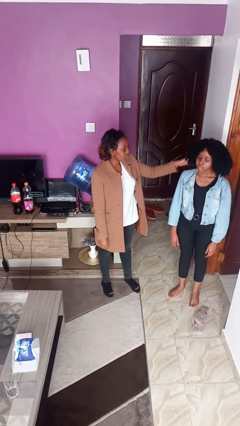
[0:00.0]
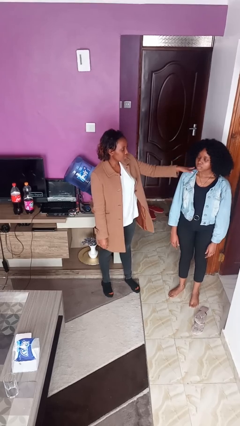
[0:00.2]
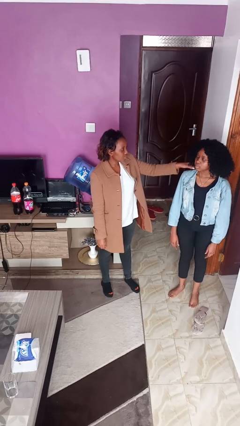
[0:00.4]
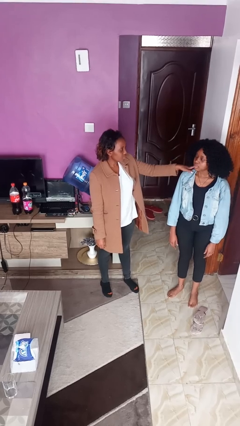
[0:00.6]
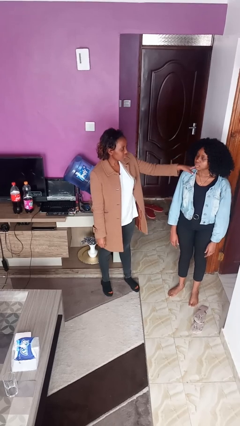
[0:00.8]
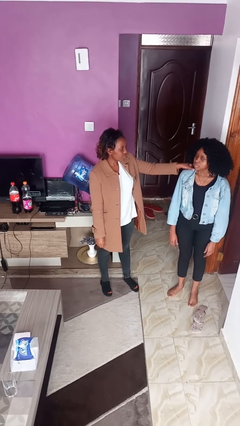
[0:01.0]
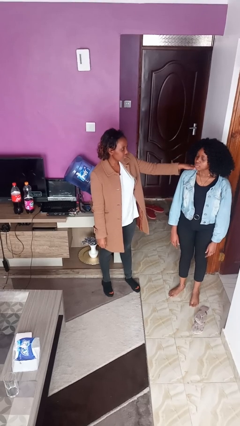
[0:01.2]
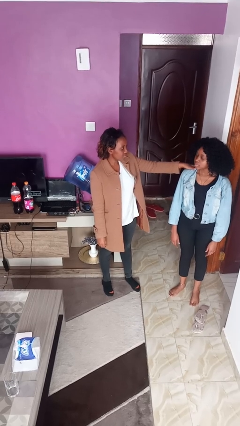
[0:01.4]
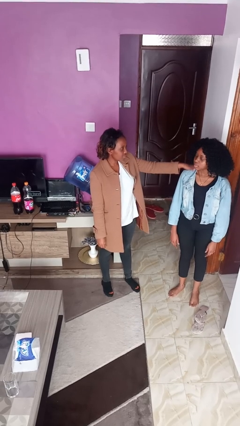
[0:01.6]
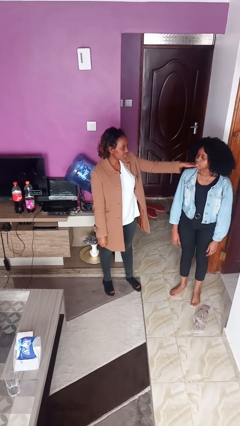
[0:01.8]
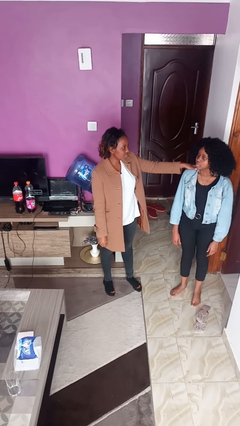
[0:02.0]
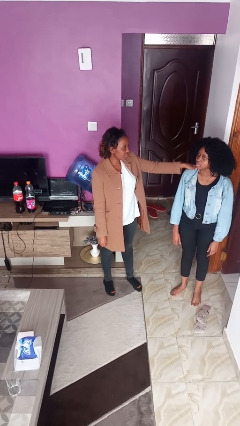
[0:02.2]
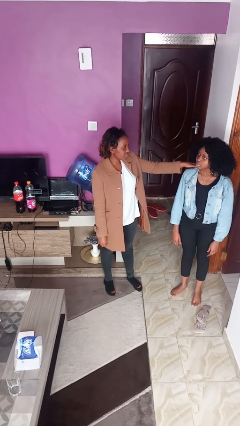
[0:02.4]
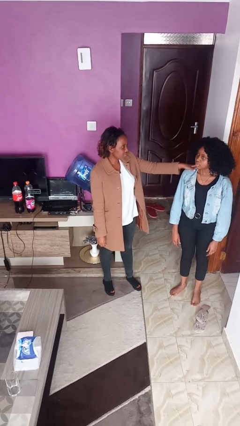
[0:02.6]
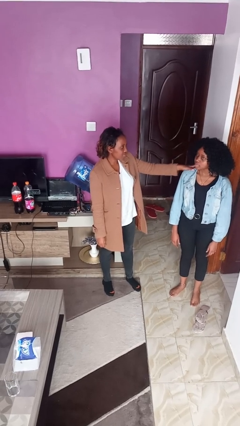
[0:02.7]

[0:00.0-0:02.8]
person pounds shoulders of person

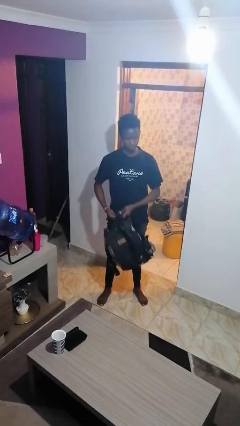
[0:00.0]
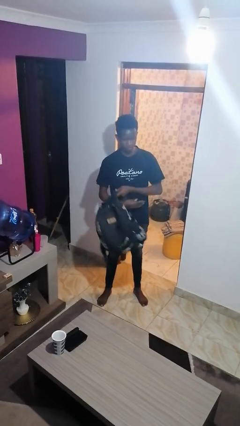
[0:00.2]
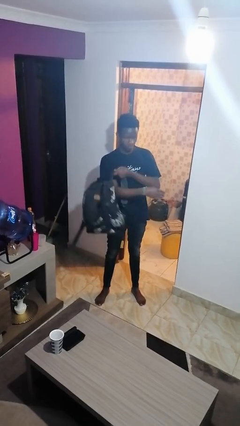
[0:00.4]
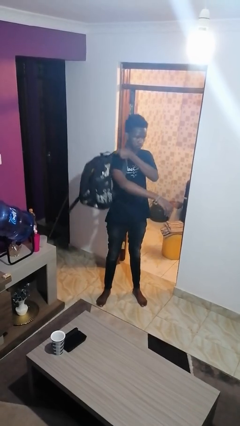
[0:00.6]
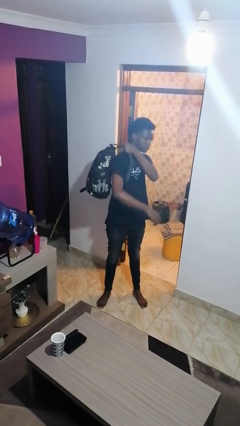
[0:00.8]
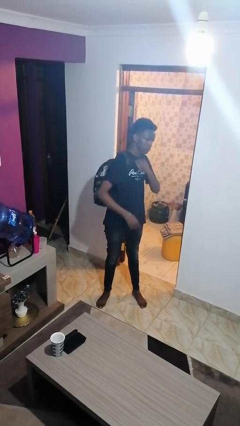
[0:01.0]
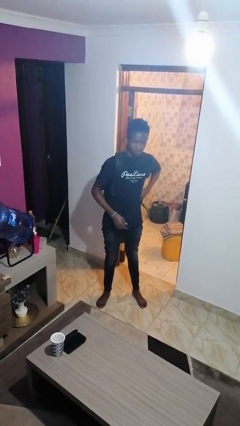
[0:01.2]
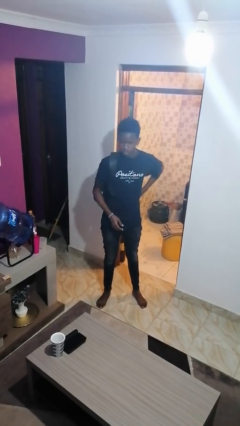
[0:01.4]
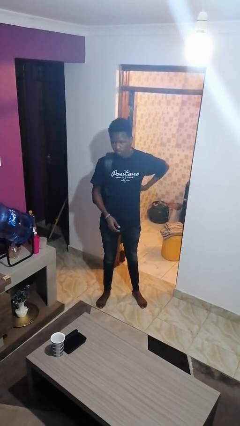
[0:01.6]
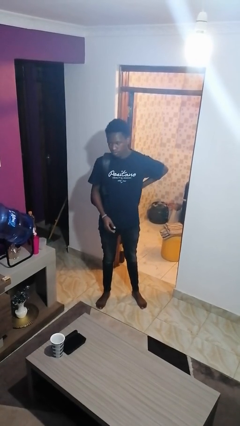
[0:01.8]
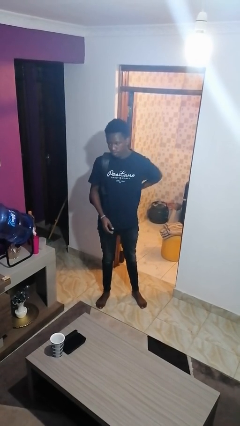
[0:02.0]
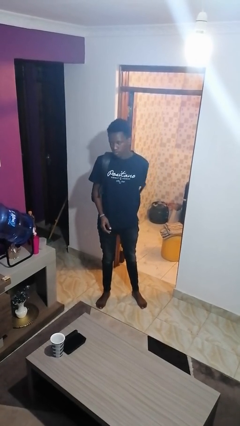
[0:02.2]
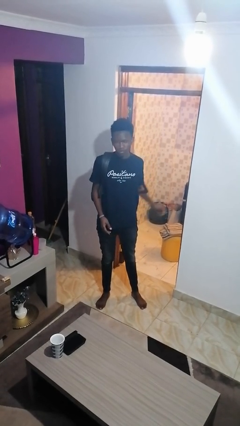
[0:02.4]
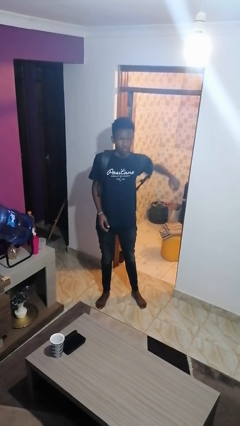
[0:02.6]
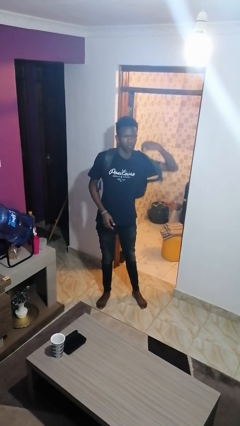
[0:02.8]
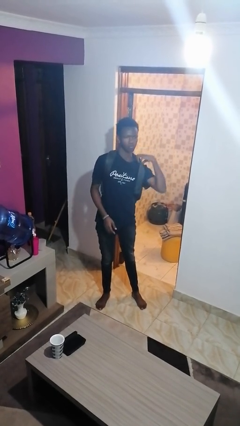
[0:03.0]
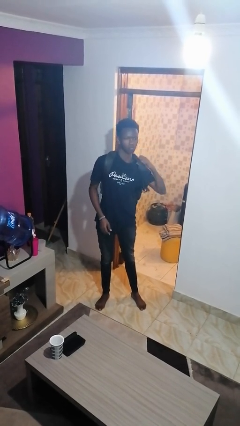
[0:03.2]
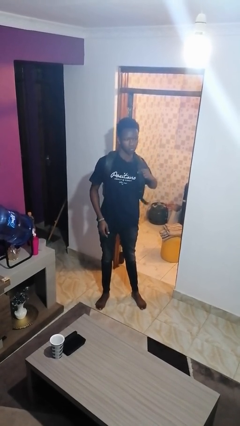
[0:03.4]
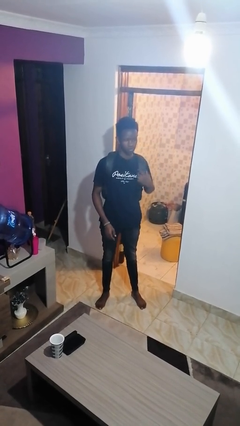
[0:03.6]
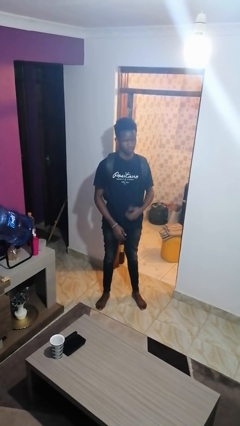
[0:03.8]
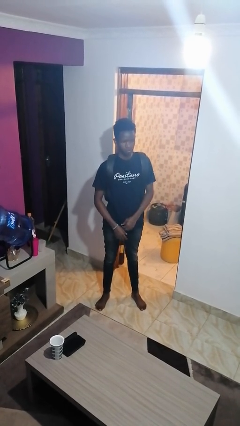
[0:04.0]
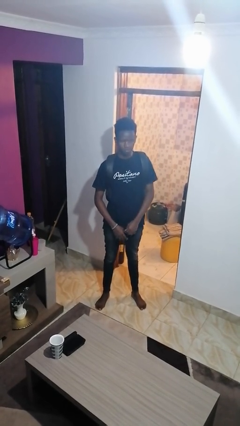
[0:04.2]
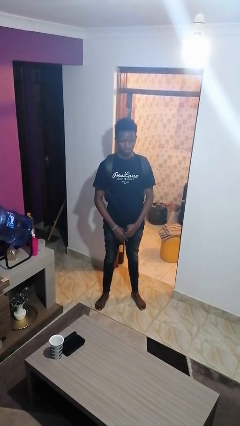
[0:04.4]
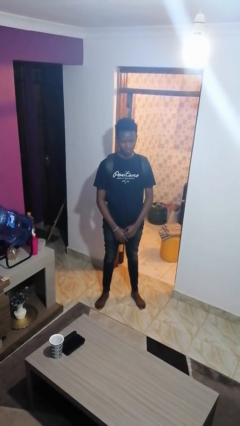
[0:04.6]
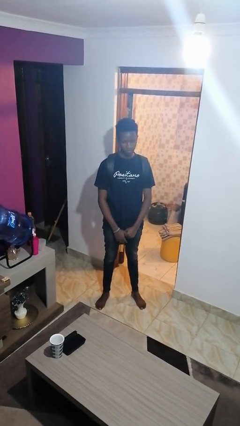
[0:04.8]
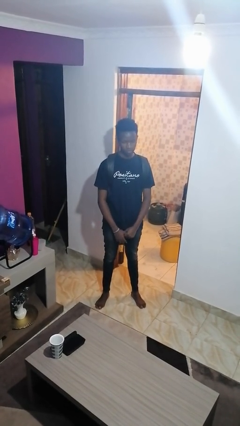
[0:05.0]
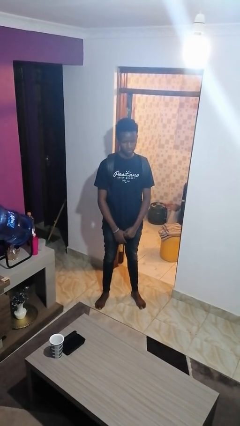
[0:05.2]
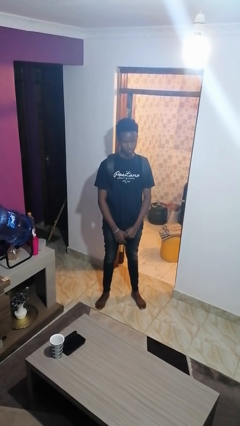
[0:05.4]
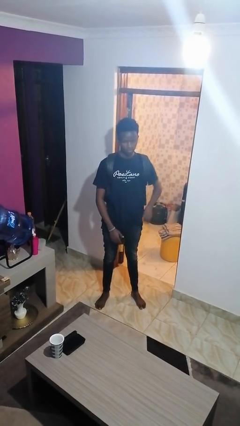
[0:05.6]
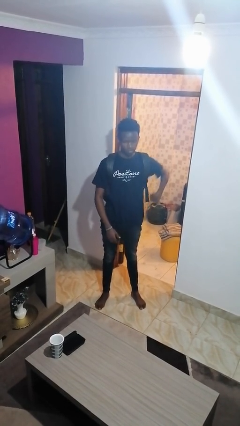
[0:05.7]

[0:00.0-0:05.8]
person puts on backpack

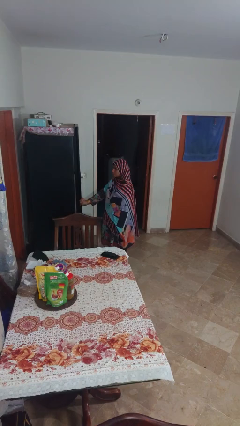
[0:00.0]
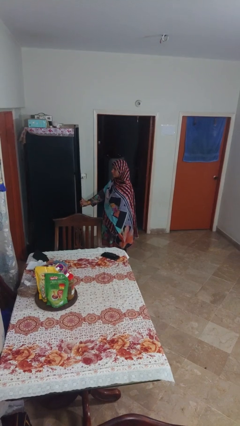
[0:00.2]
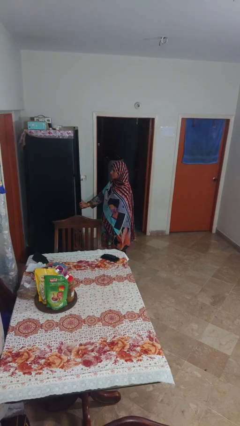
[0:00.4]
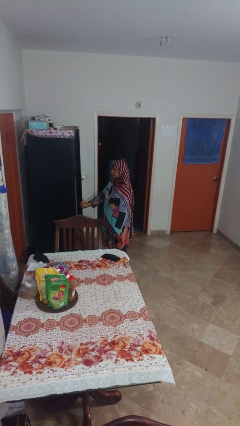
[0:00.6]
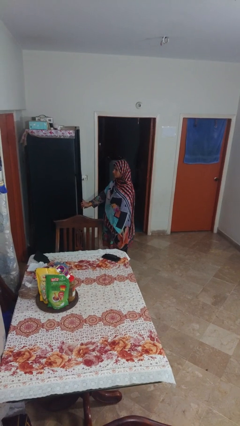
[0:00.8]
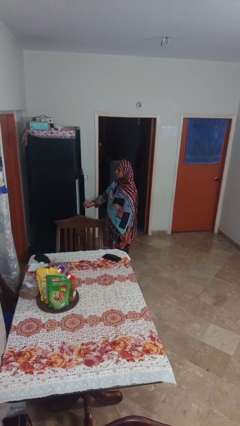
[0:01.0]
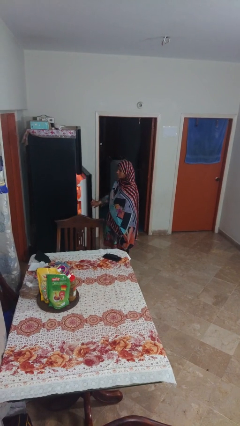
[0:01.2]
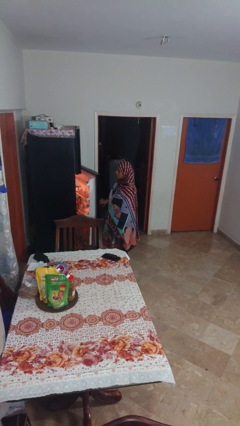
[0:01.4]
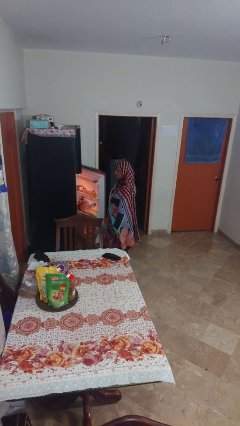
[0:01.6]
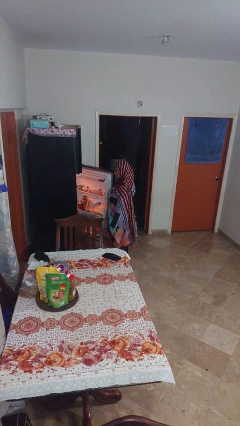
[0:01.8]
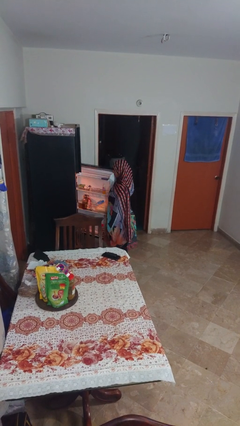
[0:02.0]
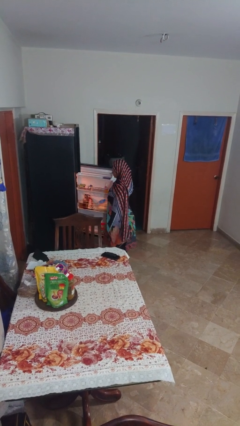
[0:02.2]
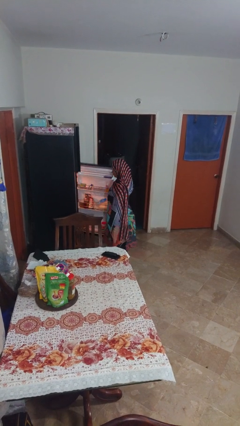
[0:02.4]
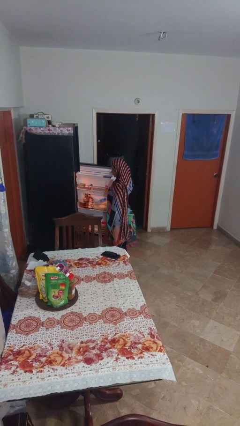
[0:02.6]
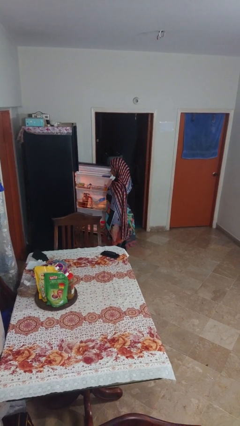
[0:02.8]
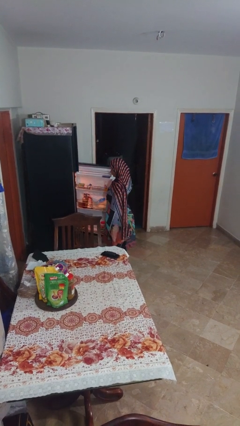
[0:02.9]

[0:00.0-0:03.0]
person opens refrigerator

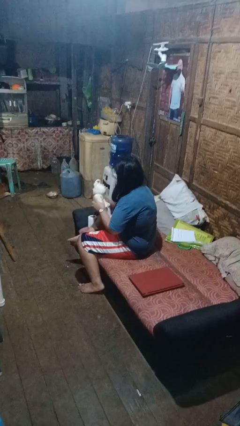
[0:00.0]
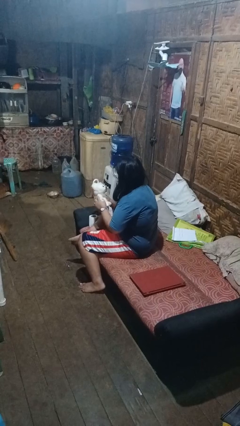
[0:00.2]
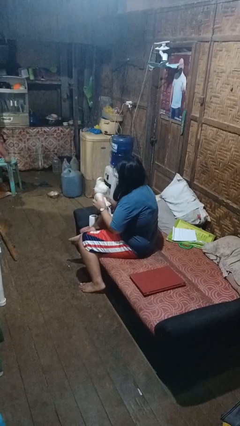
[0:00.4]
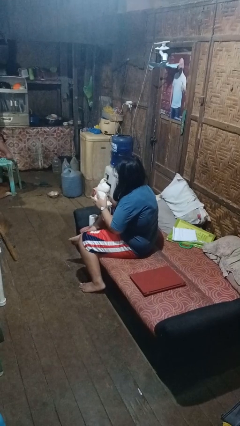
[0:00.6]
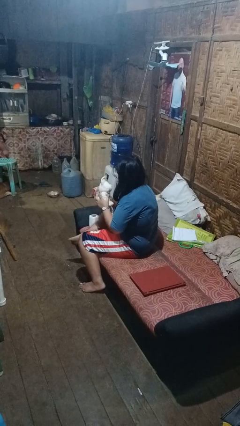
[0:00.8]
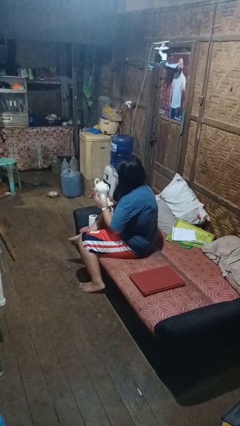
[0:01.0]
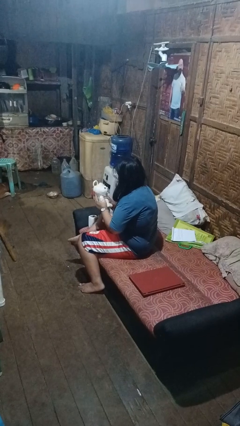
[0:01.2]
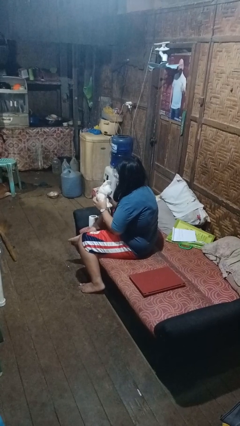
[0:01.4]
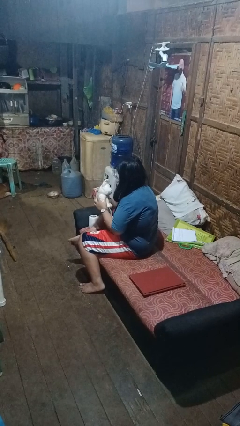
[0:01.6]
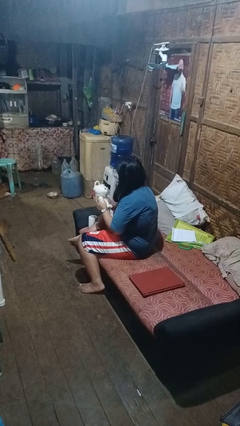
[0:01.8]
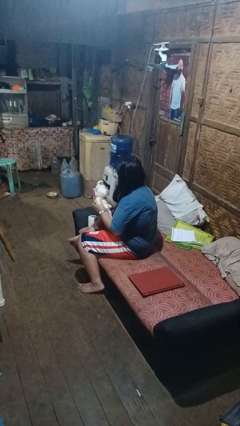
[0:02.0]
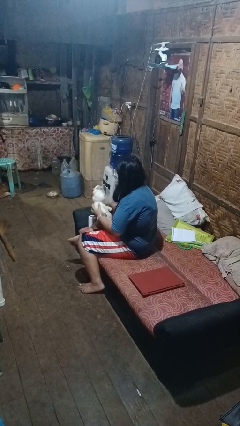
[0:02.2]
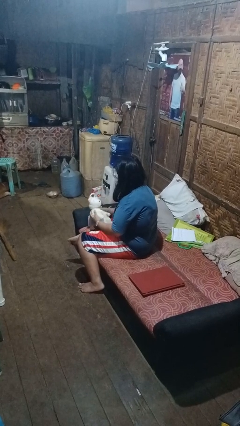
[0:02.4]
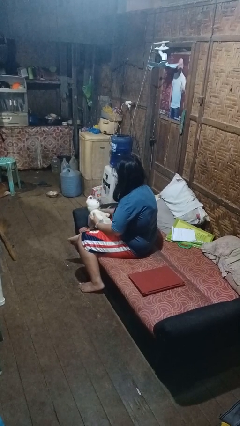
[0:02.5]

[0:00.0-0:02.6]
person squeezes object

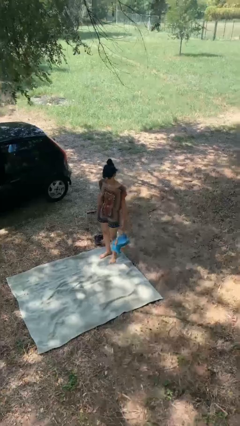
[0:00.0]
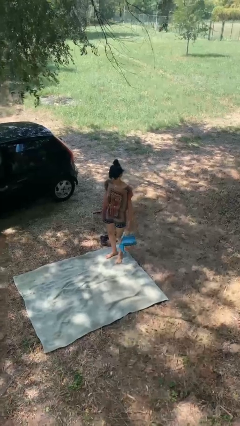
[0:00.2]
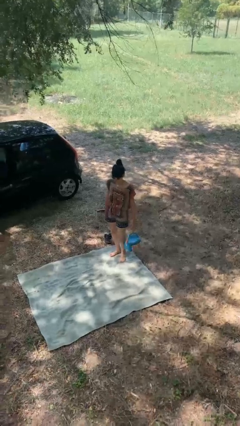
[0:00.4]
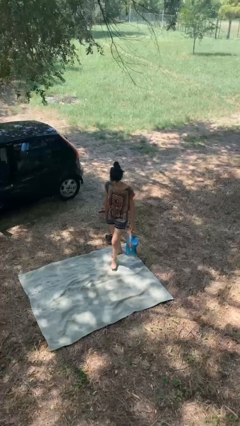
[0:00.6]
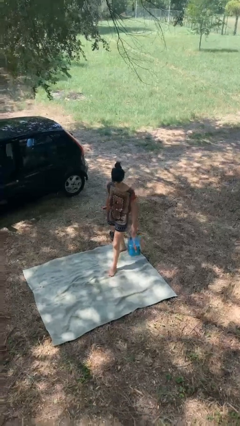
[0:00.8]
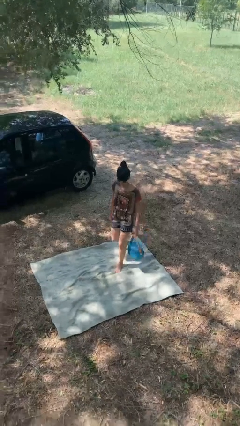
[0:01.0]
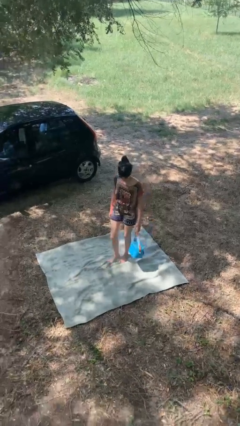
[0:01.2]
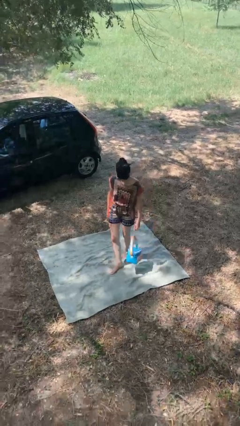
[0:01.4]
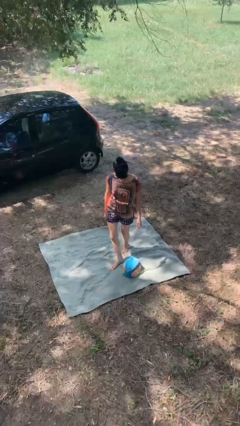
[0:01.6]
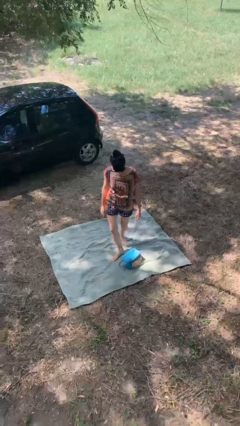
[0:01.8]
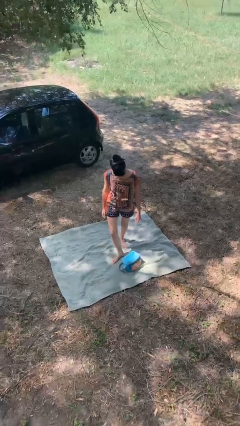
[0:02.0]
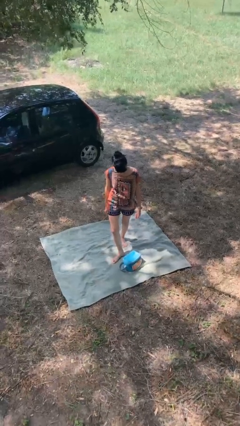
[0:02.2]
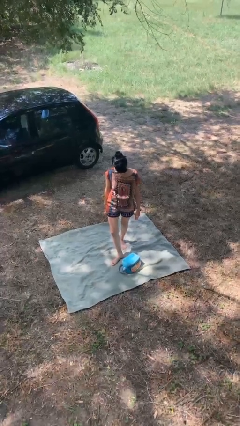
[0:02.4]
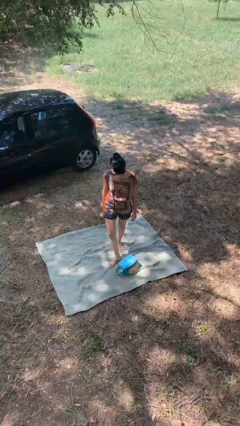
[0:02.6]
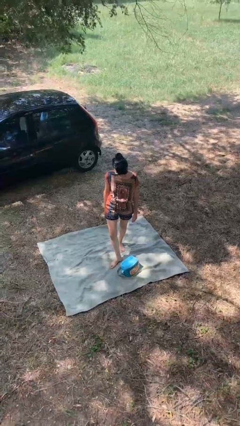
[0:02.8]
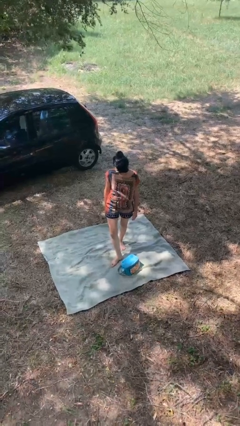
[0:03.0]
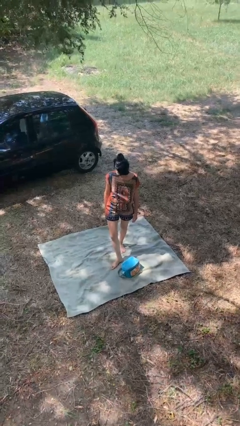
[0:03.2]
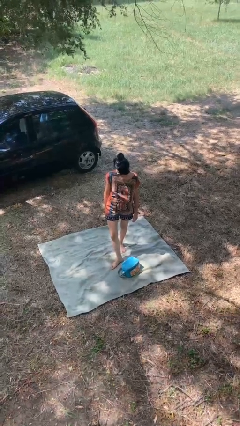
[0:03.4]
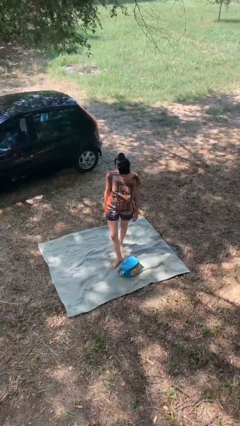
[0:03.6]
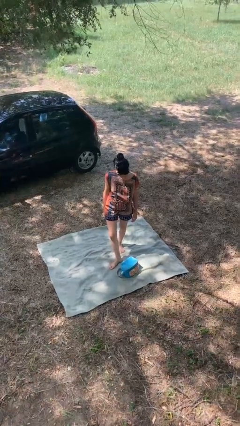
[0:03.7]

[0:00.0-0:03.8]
person drops object
